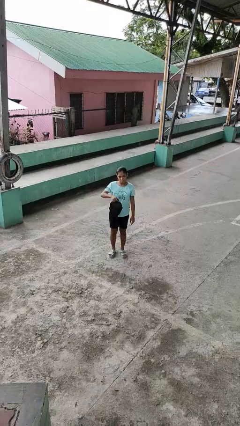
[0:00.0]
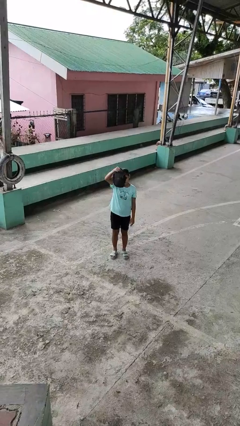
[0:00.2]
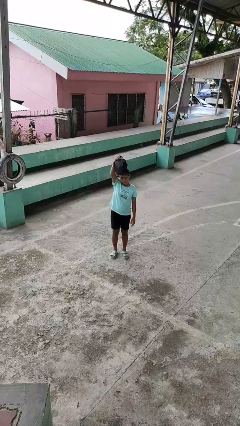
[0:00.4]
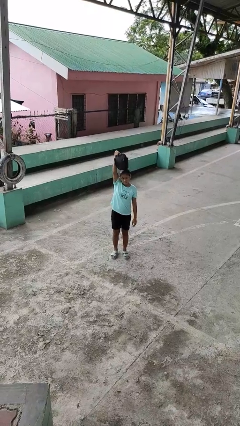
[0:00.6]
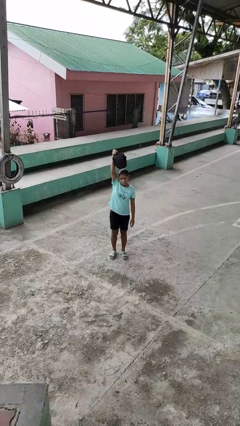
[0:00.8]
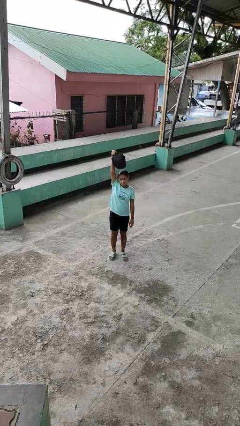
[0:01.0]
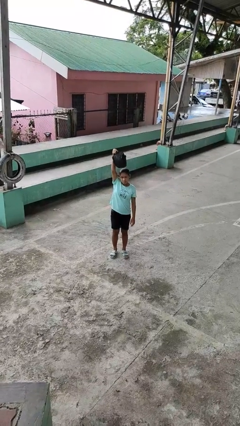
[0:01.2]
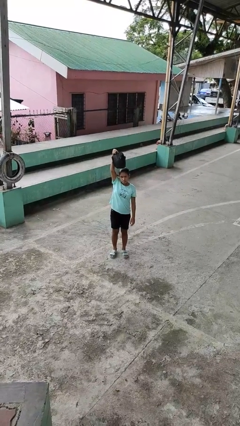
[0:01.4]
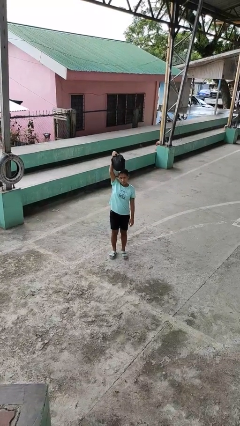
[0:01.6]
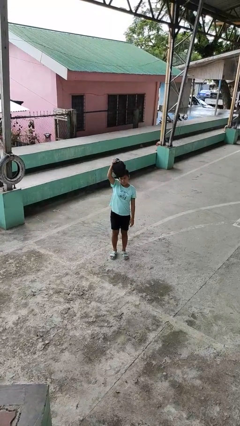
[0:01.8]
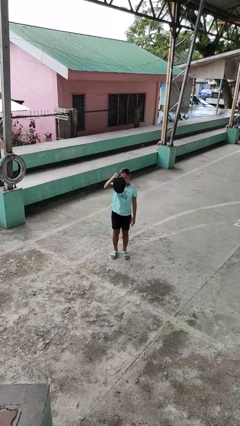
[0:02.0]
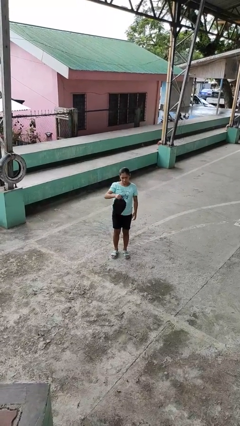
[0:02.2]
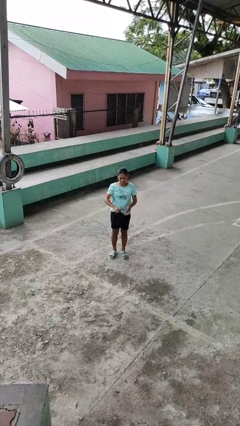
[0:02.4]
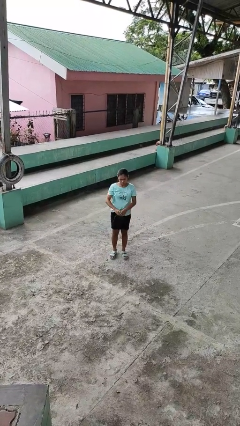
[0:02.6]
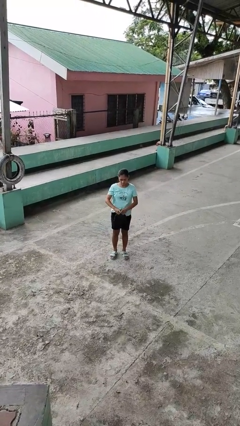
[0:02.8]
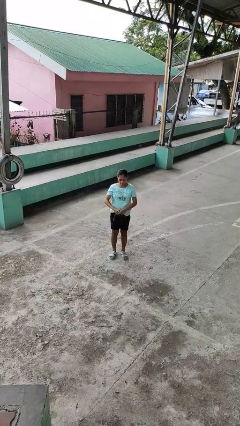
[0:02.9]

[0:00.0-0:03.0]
person holds object above head

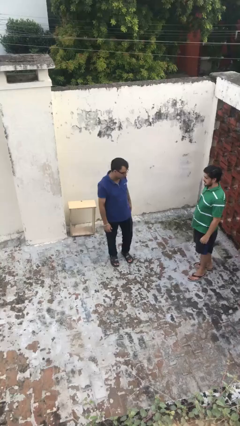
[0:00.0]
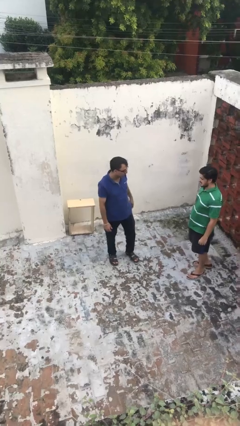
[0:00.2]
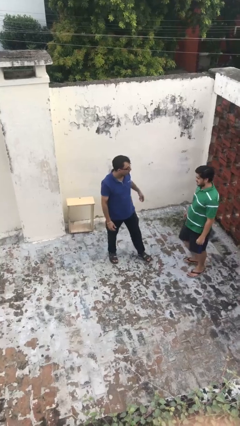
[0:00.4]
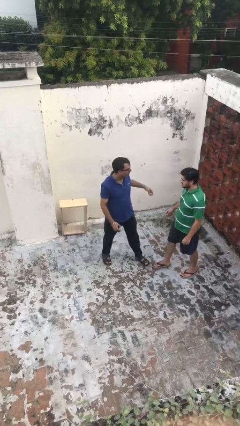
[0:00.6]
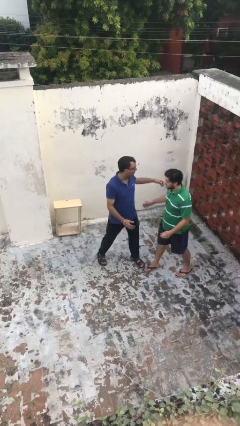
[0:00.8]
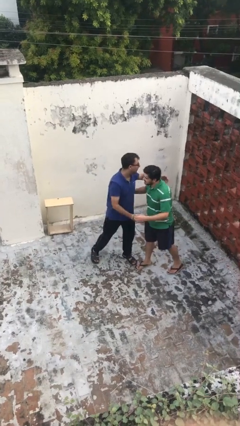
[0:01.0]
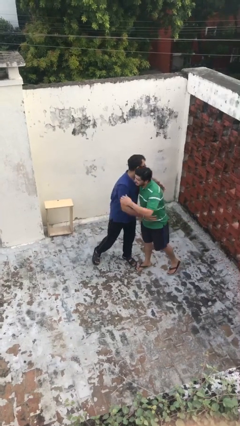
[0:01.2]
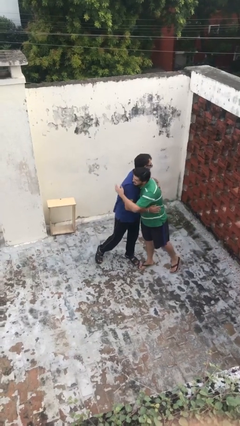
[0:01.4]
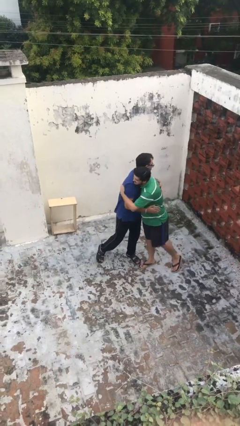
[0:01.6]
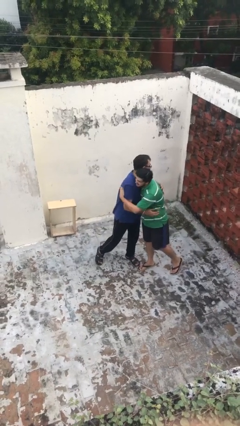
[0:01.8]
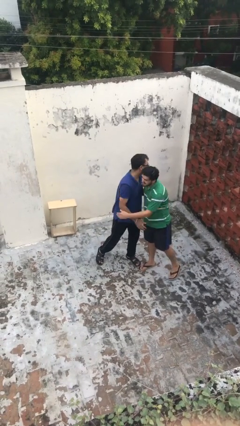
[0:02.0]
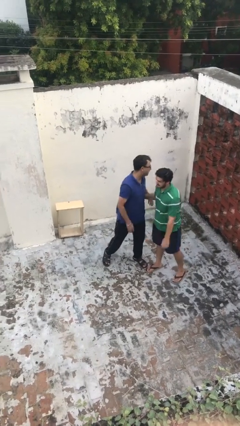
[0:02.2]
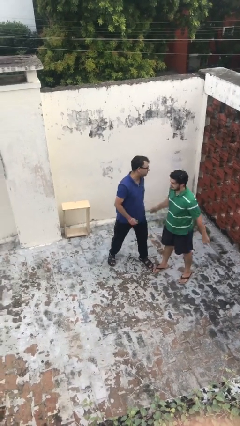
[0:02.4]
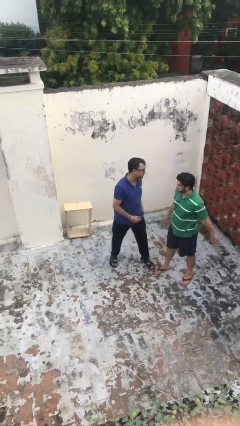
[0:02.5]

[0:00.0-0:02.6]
person embraces person

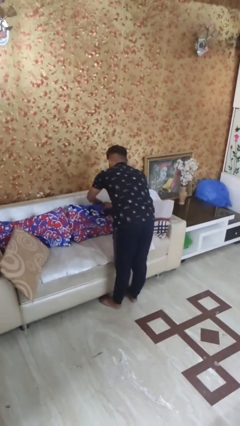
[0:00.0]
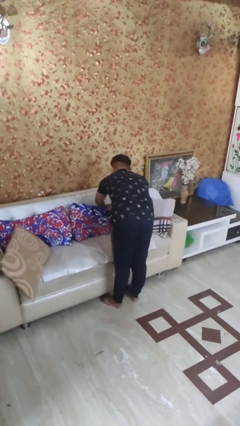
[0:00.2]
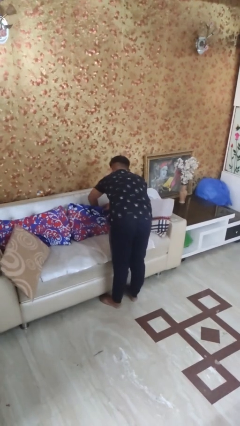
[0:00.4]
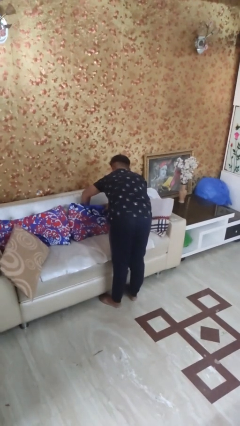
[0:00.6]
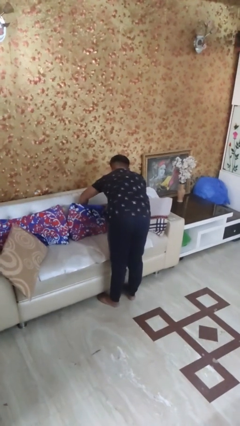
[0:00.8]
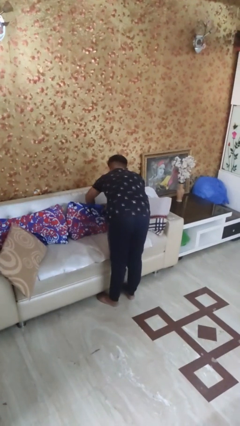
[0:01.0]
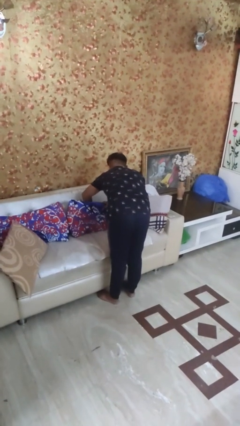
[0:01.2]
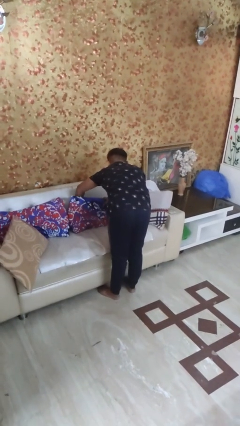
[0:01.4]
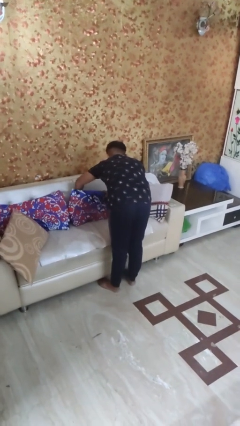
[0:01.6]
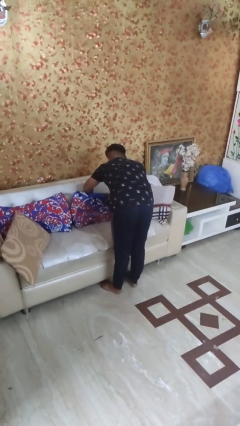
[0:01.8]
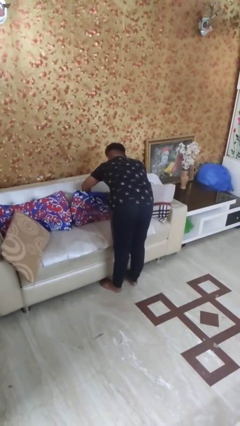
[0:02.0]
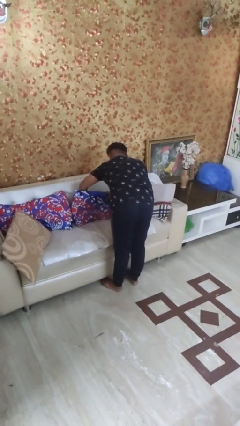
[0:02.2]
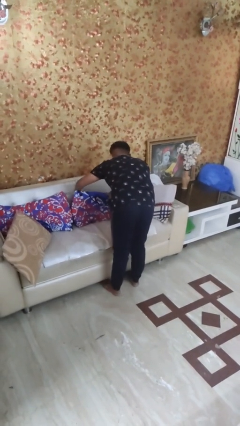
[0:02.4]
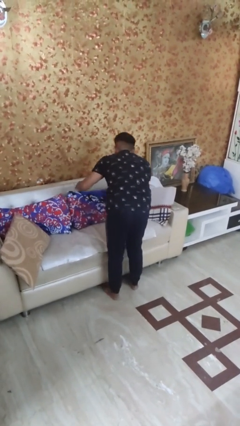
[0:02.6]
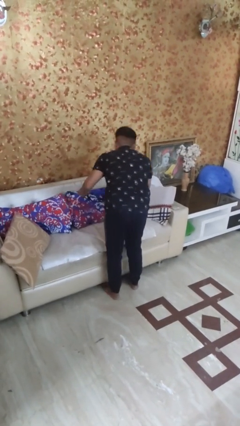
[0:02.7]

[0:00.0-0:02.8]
person searches in couch

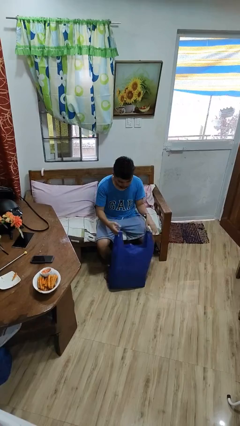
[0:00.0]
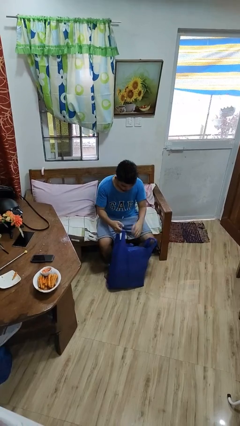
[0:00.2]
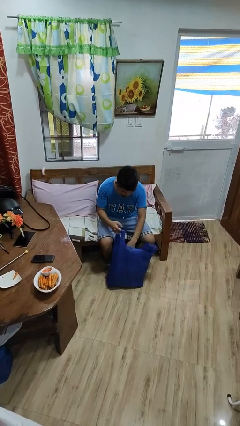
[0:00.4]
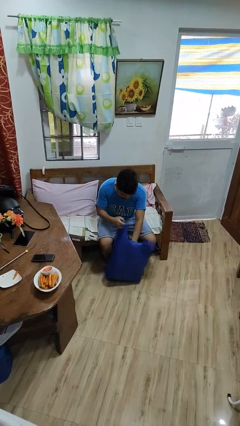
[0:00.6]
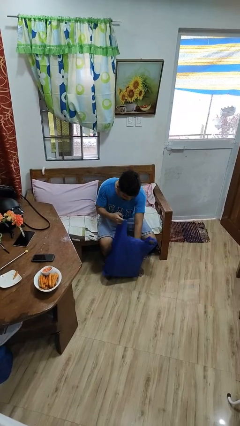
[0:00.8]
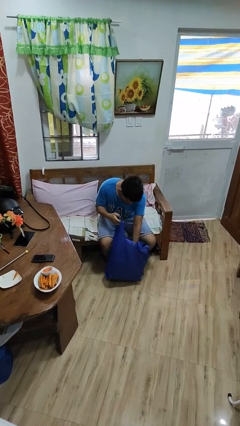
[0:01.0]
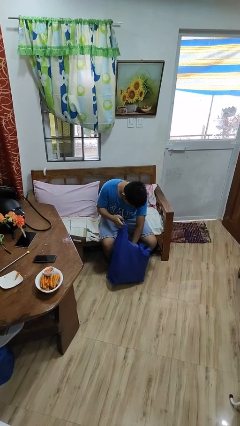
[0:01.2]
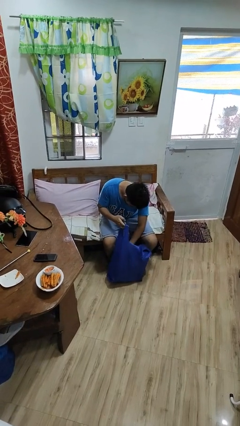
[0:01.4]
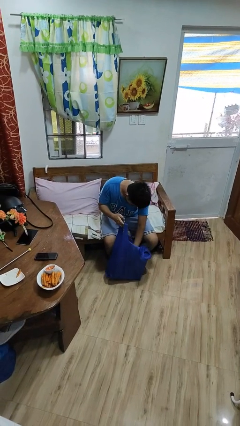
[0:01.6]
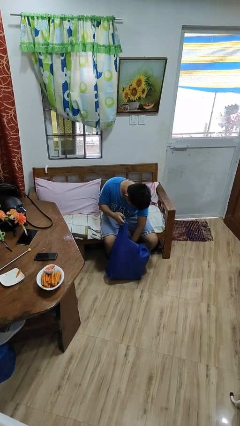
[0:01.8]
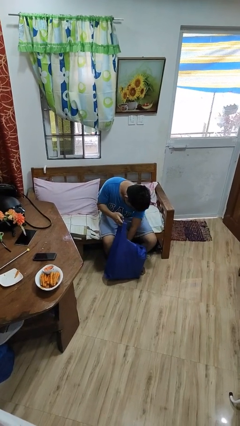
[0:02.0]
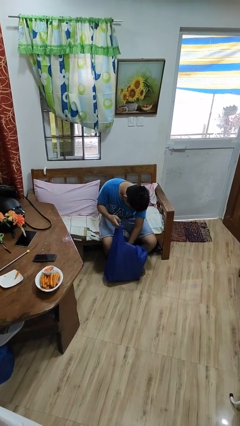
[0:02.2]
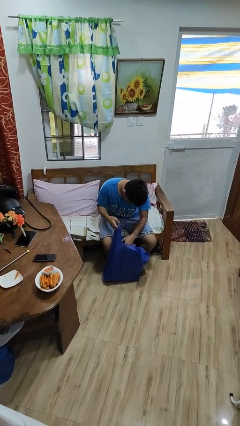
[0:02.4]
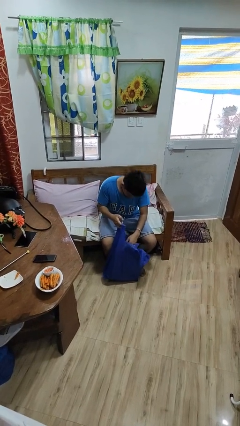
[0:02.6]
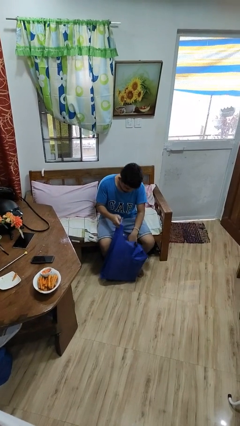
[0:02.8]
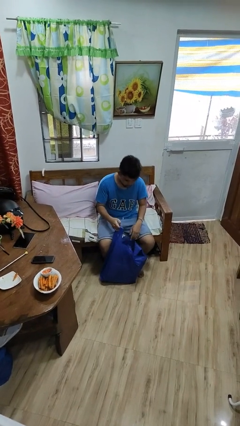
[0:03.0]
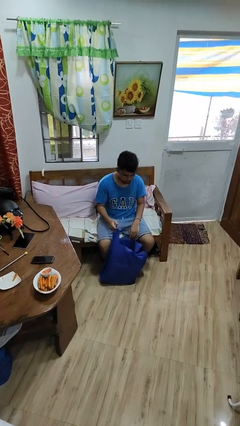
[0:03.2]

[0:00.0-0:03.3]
person searches in bag

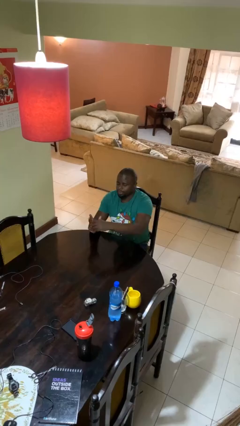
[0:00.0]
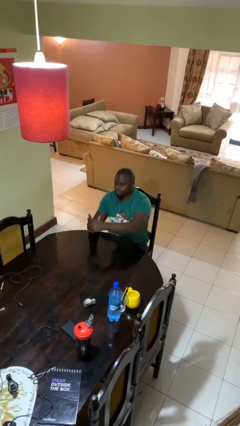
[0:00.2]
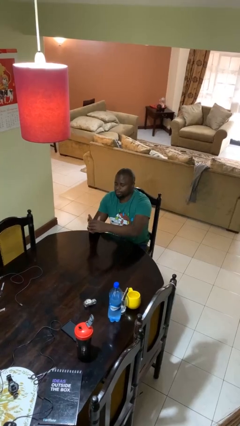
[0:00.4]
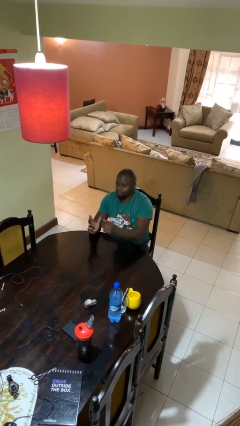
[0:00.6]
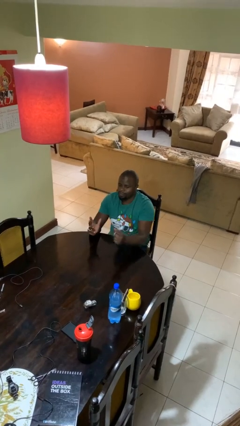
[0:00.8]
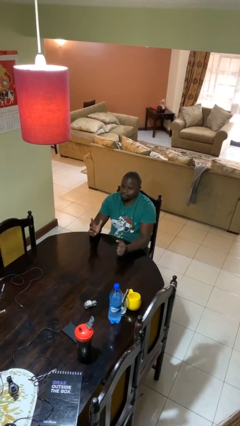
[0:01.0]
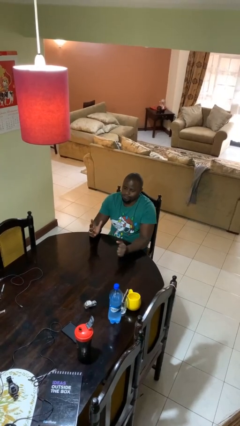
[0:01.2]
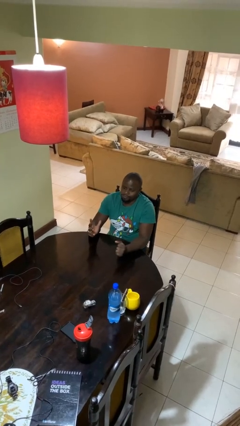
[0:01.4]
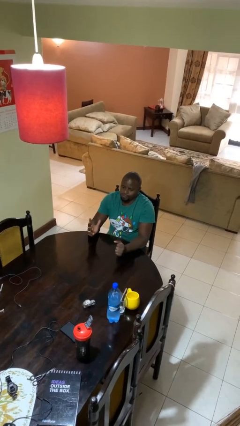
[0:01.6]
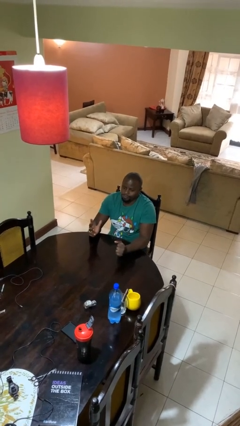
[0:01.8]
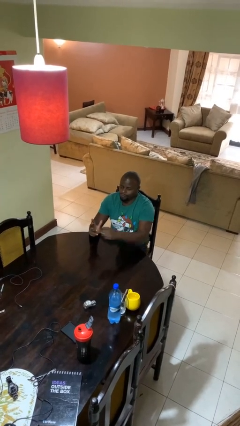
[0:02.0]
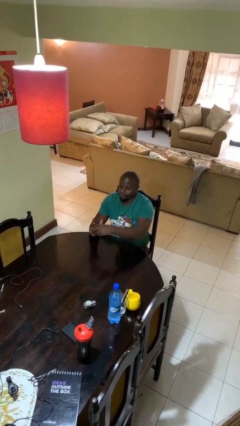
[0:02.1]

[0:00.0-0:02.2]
person puts on ring

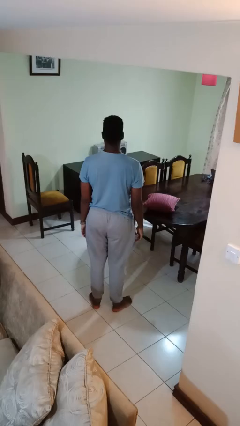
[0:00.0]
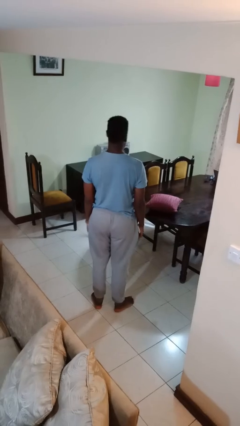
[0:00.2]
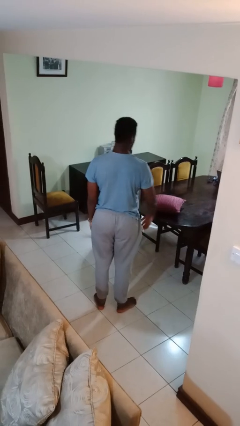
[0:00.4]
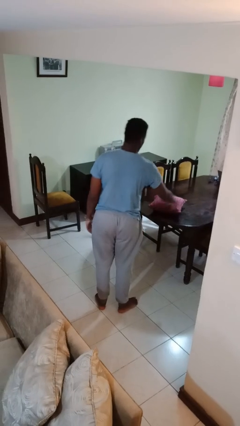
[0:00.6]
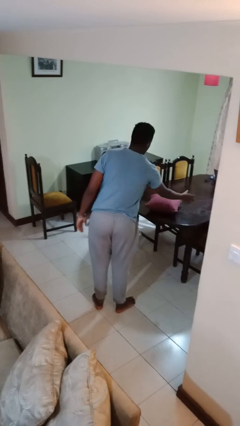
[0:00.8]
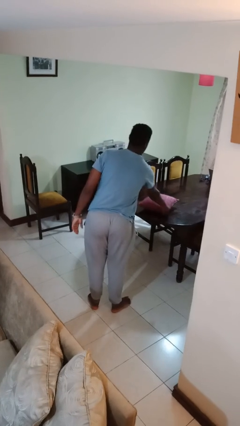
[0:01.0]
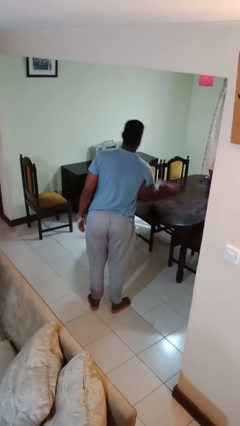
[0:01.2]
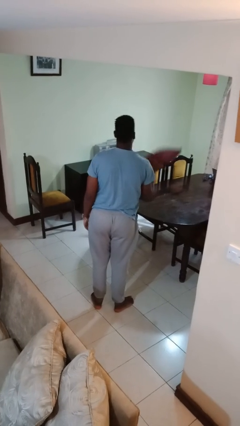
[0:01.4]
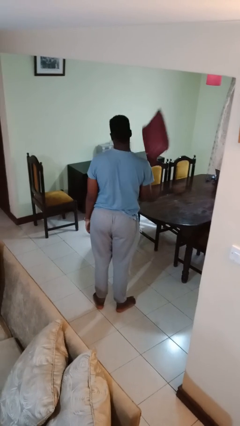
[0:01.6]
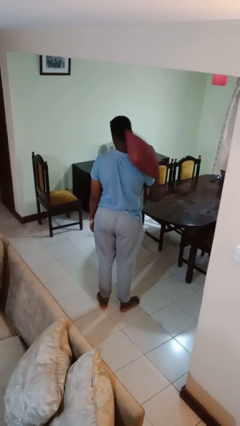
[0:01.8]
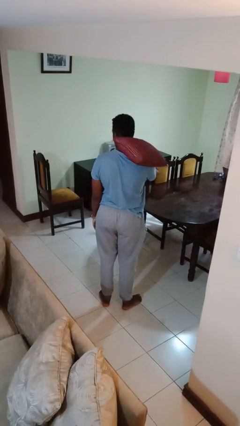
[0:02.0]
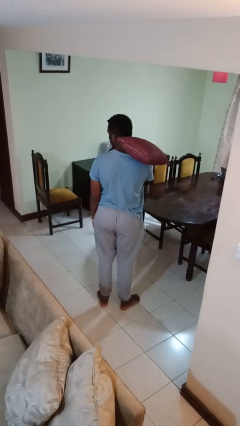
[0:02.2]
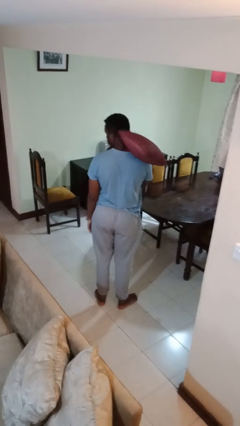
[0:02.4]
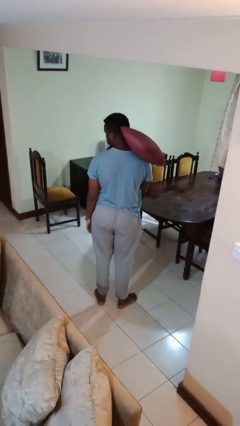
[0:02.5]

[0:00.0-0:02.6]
person picks up object from table

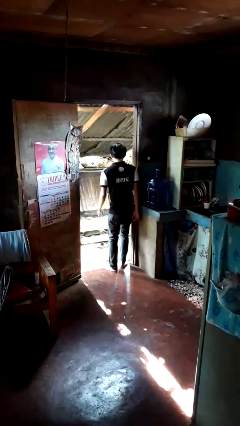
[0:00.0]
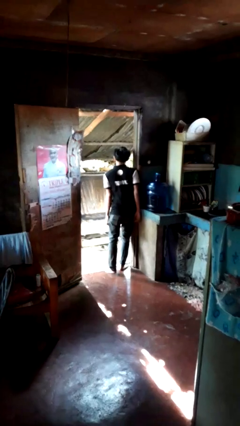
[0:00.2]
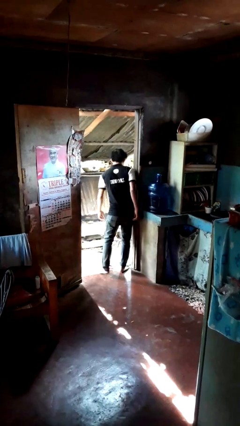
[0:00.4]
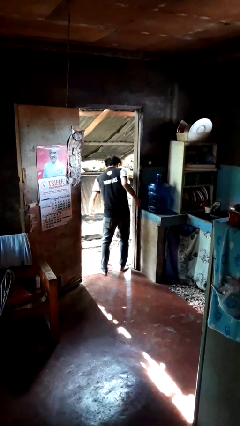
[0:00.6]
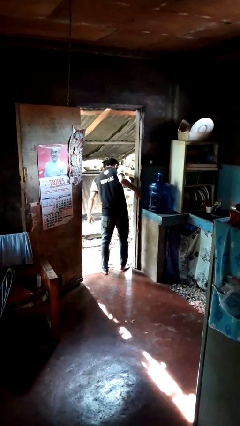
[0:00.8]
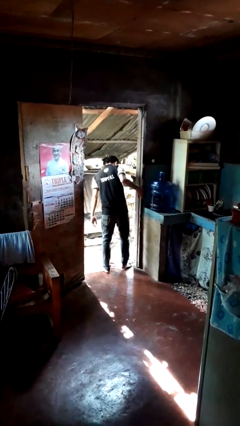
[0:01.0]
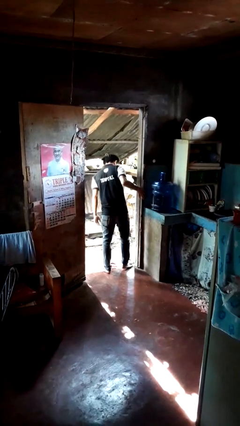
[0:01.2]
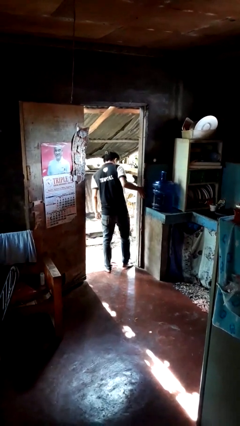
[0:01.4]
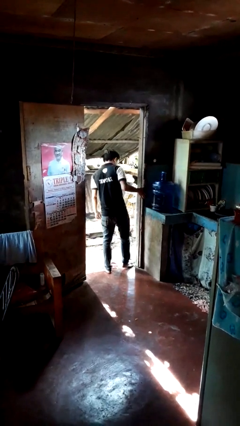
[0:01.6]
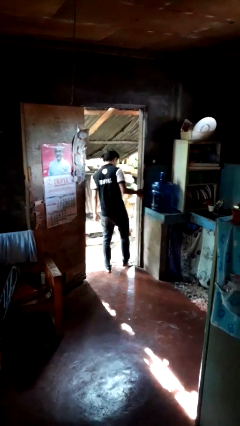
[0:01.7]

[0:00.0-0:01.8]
person bumps into wall
